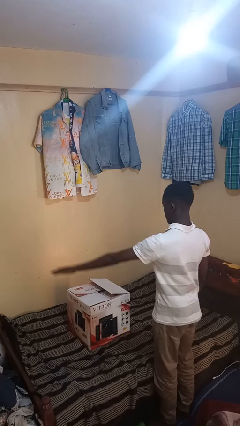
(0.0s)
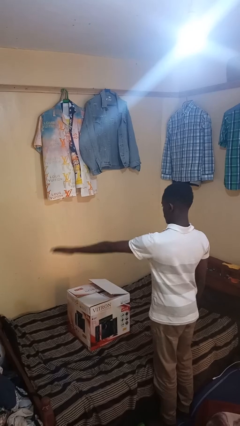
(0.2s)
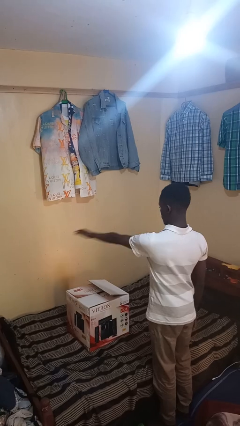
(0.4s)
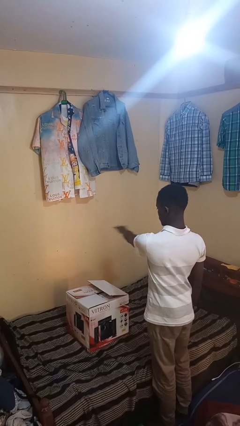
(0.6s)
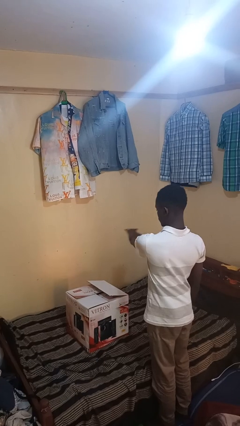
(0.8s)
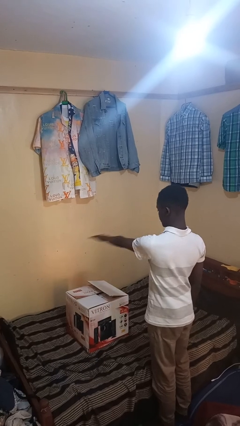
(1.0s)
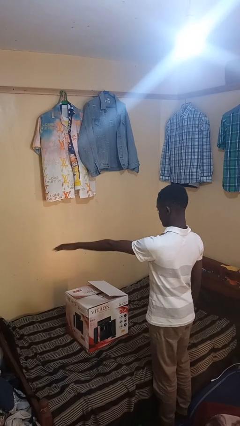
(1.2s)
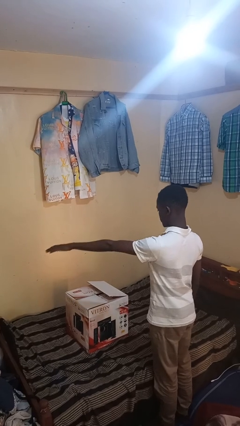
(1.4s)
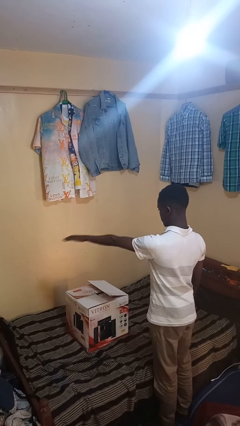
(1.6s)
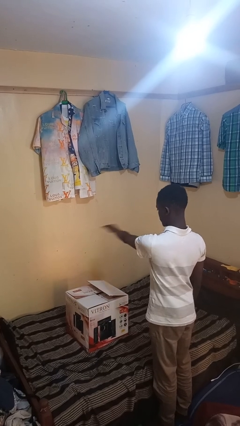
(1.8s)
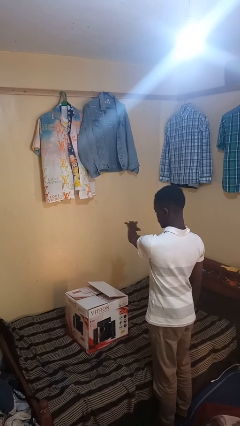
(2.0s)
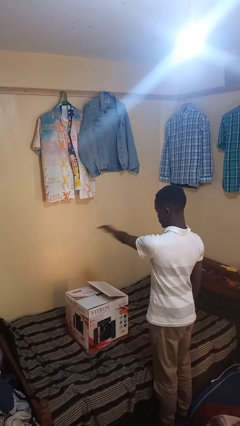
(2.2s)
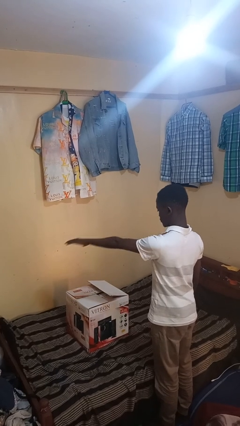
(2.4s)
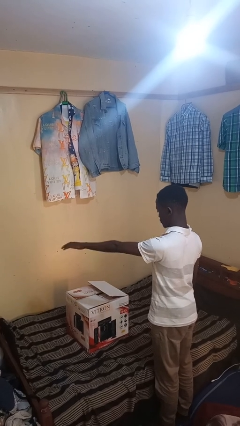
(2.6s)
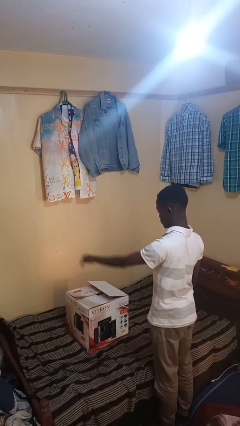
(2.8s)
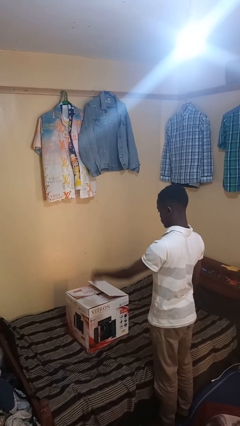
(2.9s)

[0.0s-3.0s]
person waves hand over object

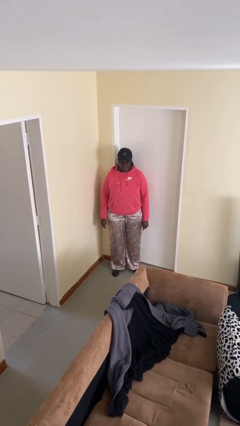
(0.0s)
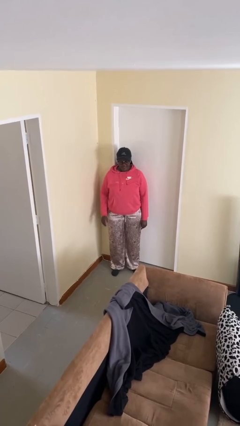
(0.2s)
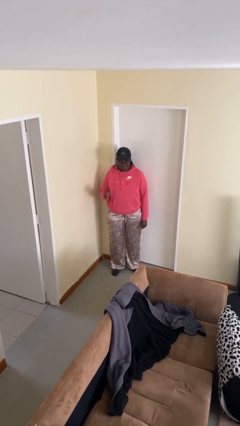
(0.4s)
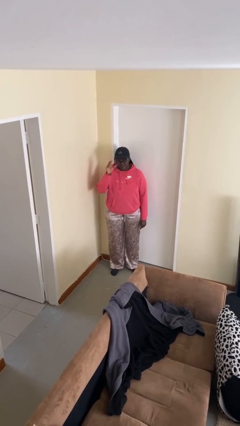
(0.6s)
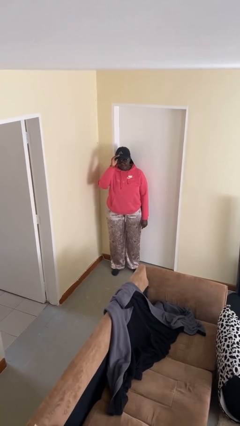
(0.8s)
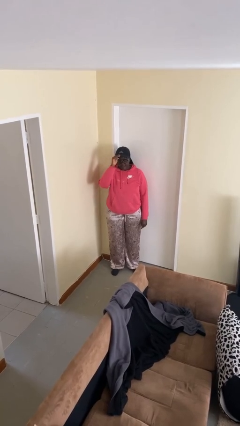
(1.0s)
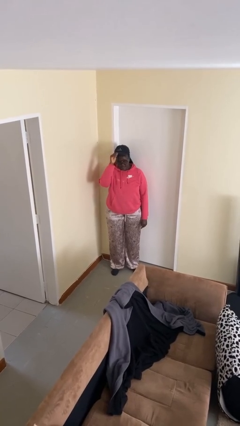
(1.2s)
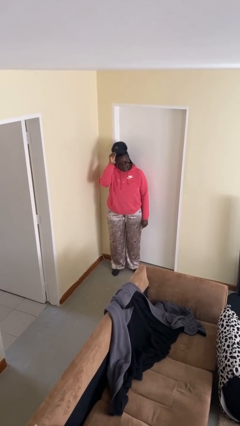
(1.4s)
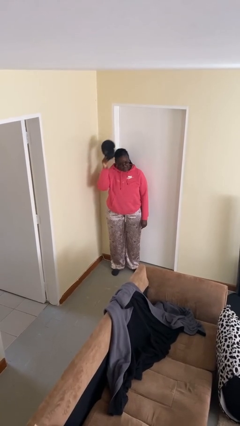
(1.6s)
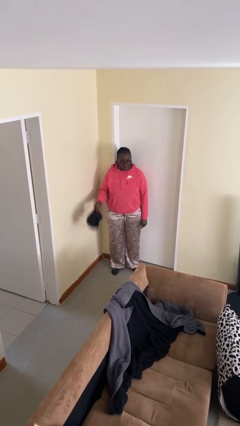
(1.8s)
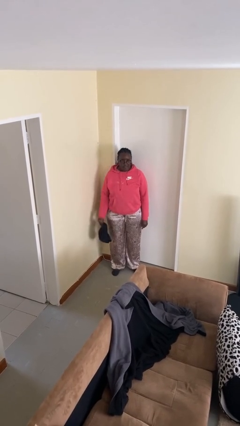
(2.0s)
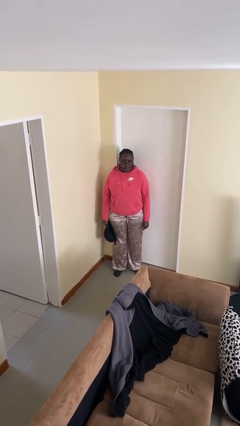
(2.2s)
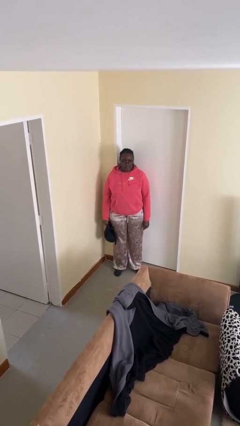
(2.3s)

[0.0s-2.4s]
person takes off hat

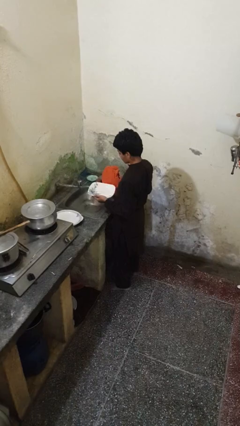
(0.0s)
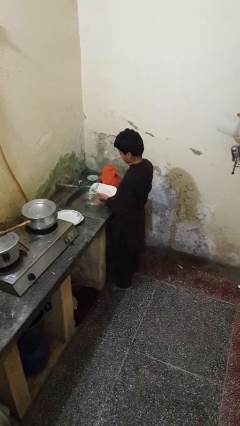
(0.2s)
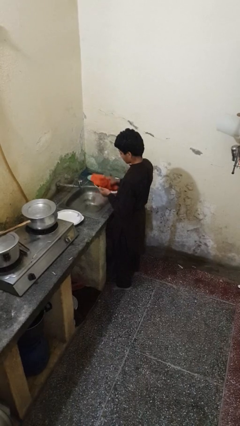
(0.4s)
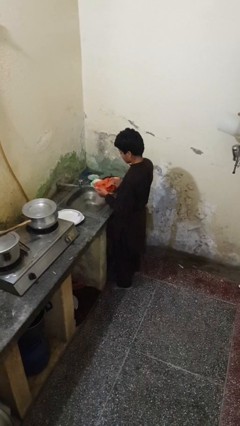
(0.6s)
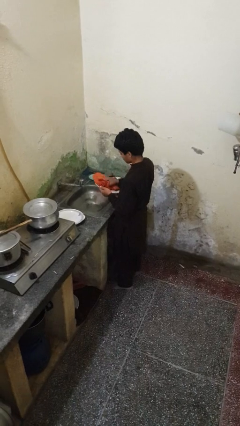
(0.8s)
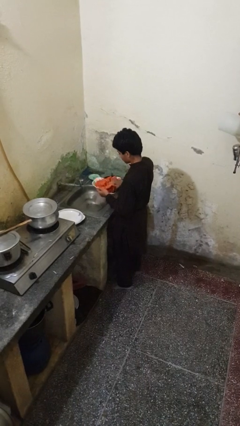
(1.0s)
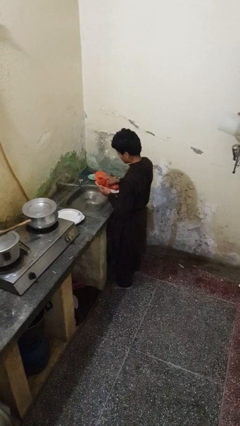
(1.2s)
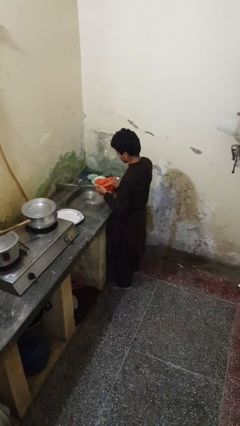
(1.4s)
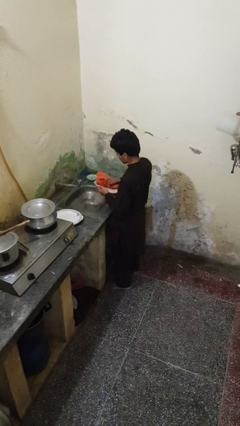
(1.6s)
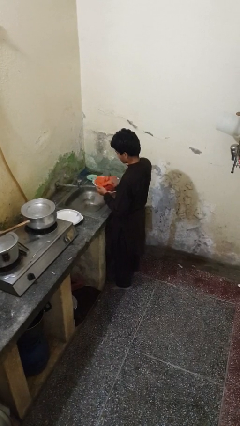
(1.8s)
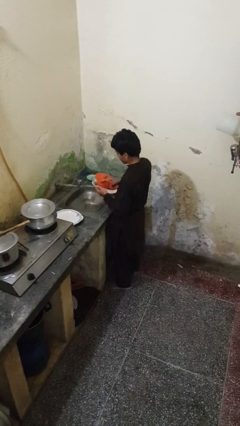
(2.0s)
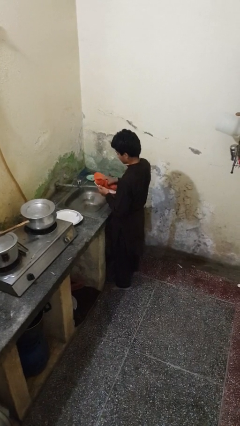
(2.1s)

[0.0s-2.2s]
person dries dish

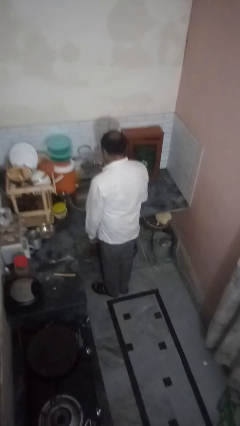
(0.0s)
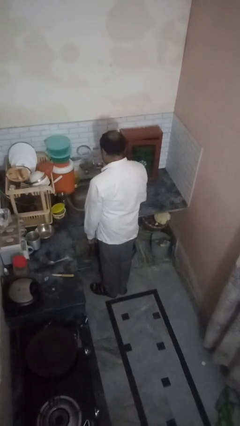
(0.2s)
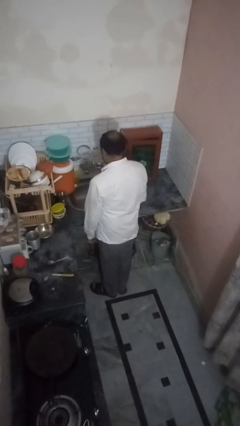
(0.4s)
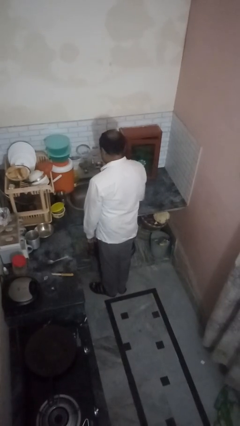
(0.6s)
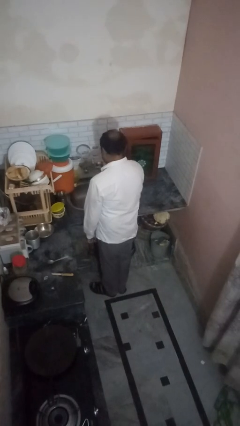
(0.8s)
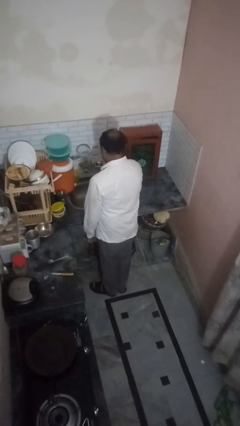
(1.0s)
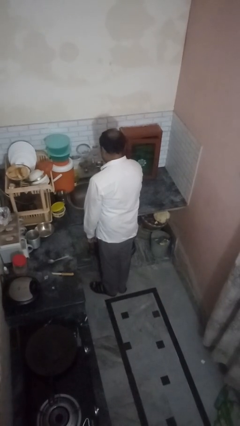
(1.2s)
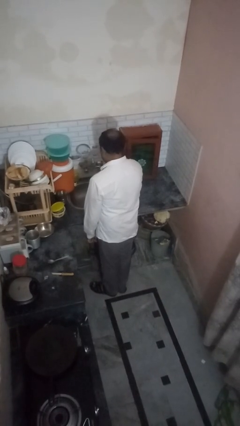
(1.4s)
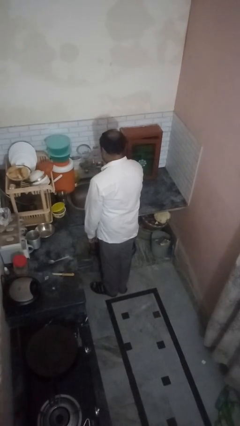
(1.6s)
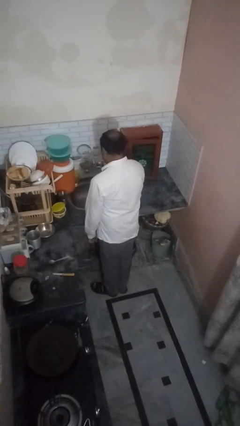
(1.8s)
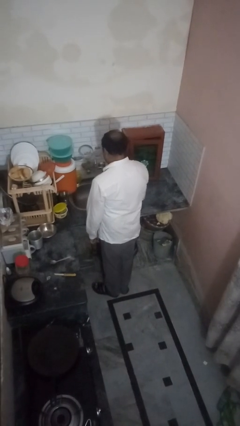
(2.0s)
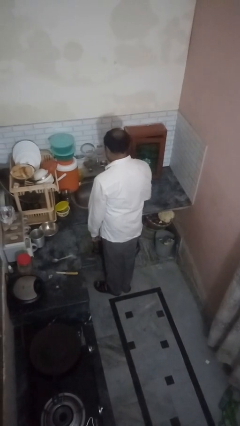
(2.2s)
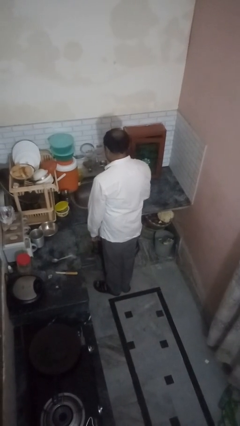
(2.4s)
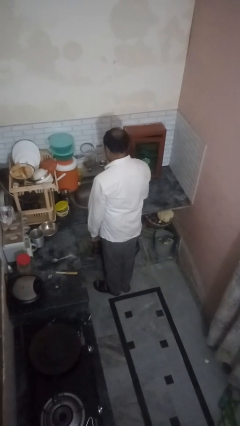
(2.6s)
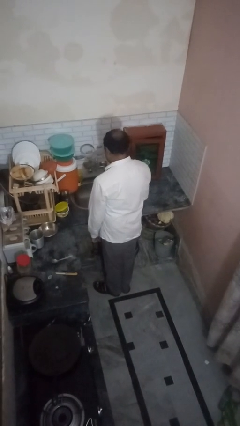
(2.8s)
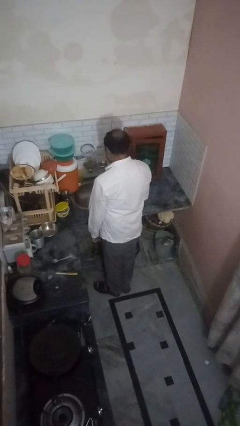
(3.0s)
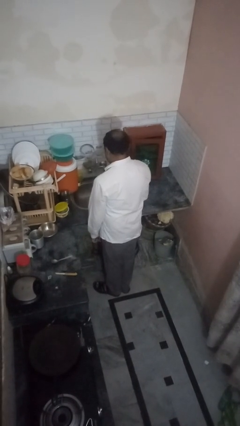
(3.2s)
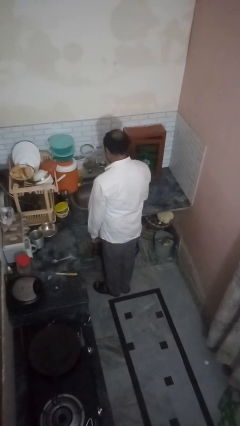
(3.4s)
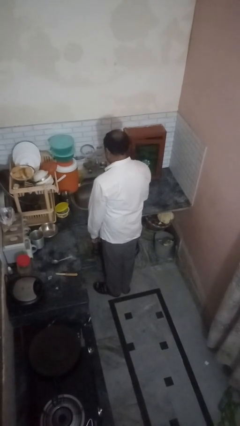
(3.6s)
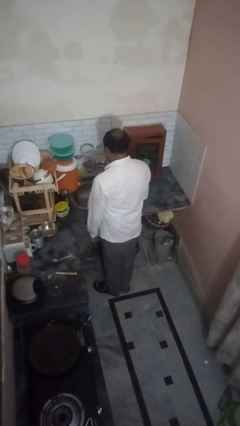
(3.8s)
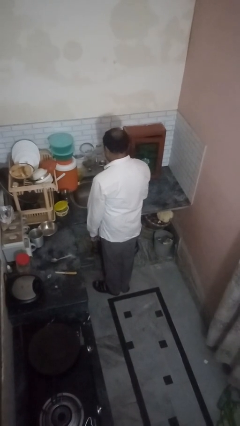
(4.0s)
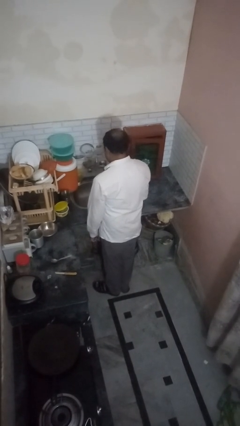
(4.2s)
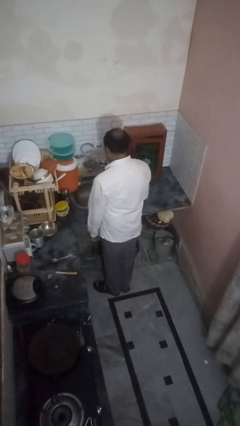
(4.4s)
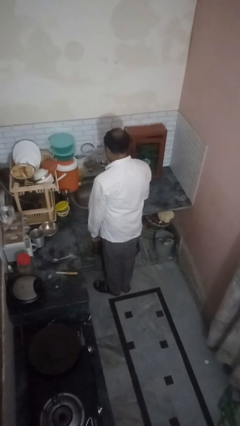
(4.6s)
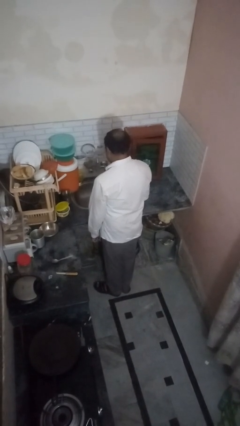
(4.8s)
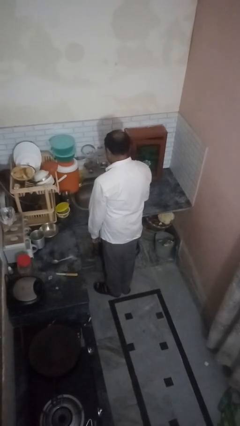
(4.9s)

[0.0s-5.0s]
person turns on faucet

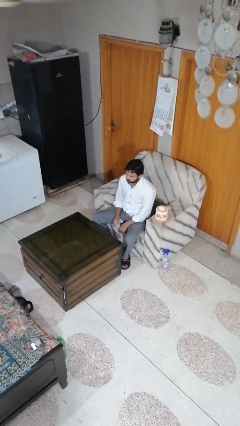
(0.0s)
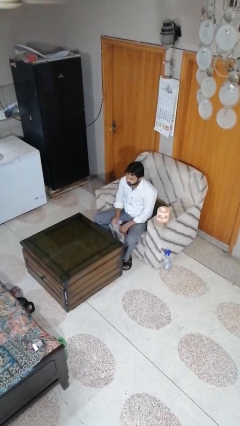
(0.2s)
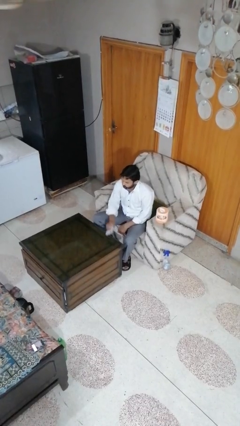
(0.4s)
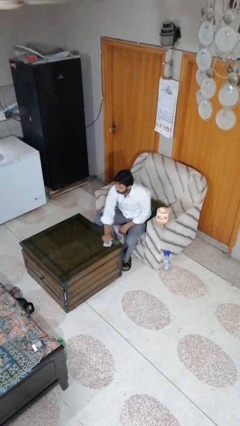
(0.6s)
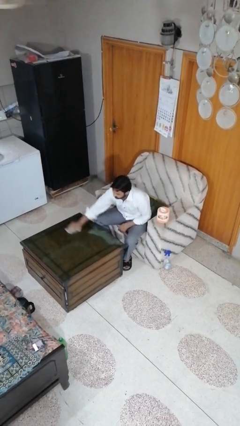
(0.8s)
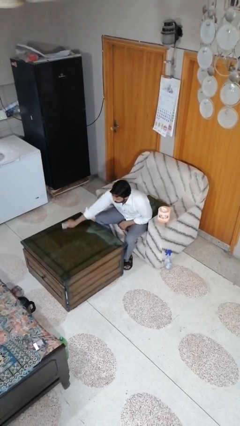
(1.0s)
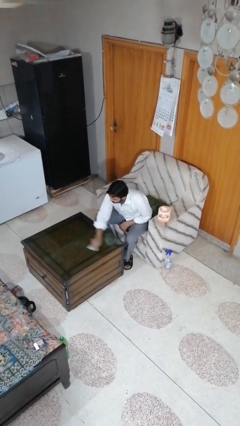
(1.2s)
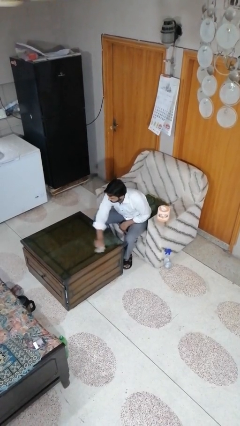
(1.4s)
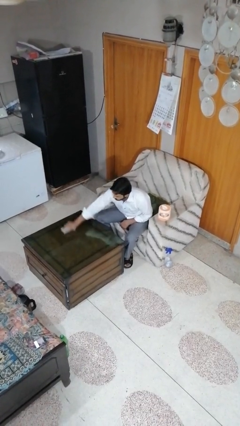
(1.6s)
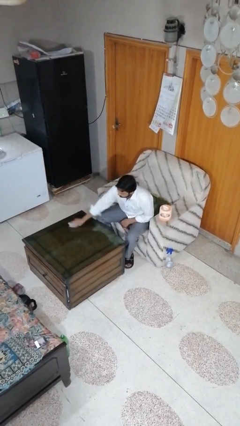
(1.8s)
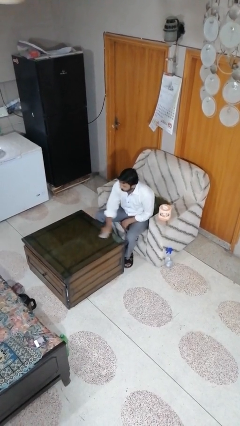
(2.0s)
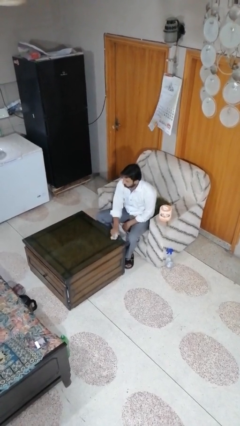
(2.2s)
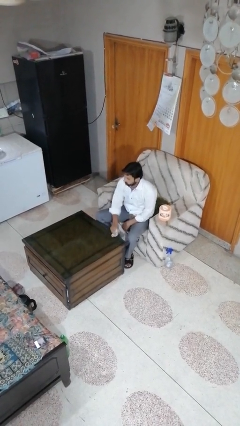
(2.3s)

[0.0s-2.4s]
person cleans table with rag

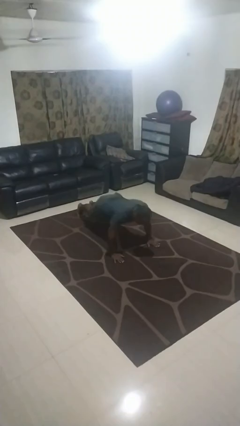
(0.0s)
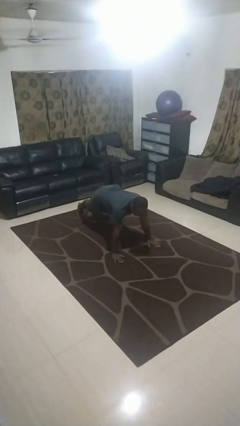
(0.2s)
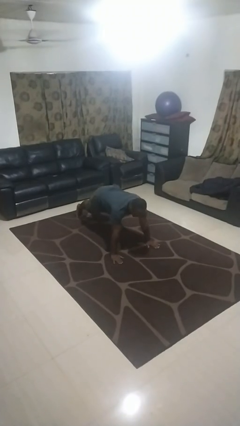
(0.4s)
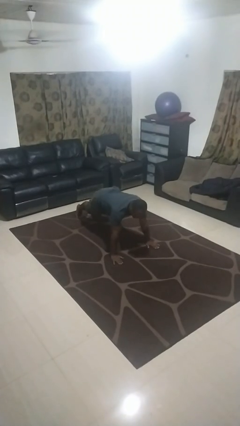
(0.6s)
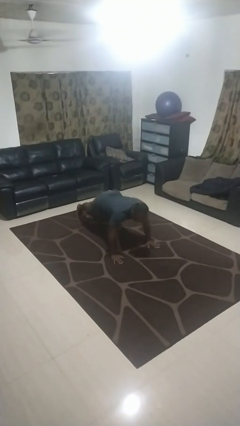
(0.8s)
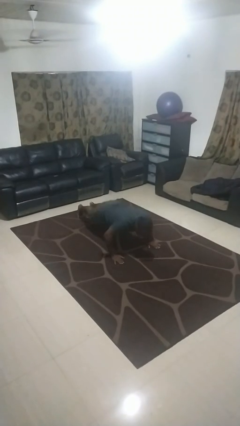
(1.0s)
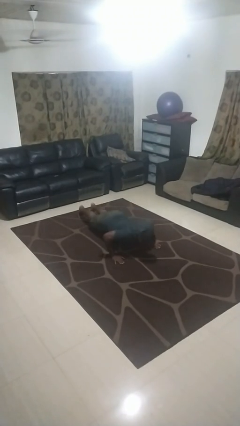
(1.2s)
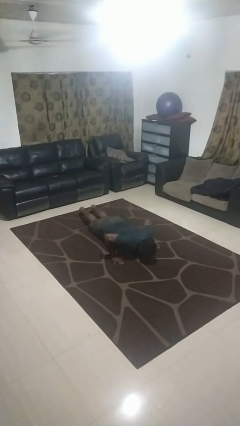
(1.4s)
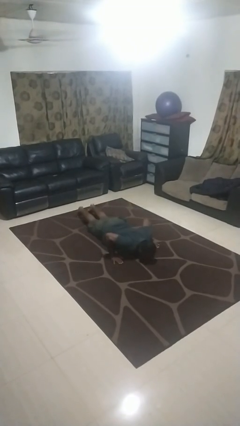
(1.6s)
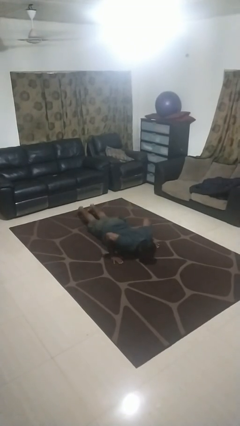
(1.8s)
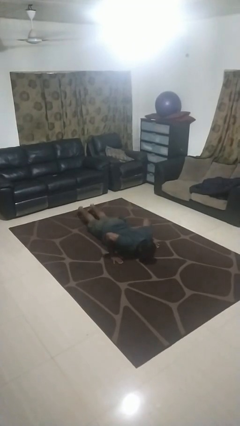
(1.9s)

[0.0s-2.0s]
person exercises with pushup

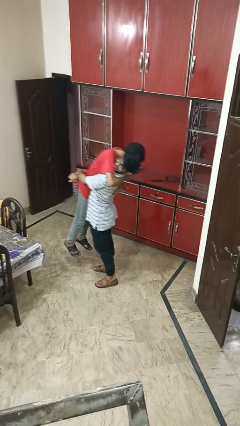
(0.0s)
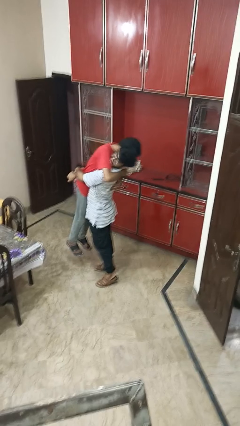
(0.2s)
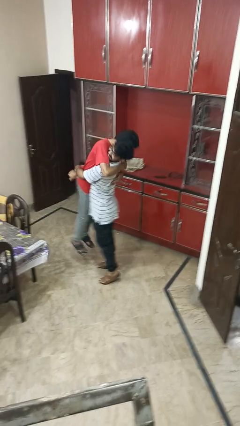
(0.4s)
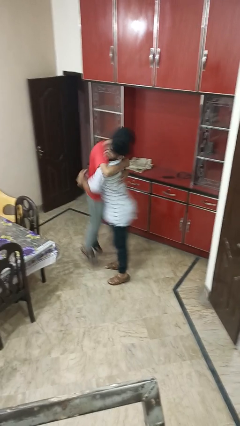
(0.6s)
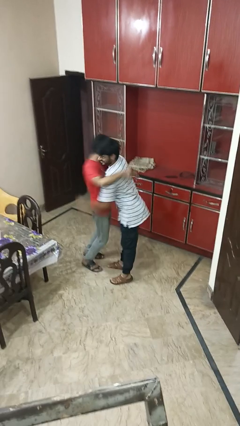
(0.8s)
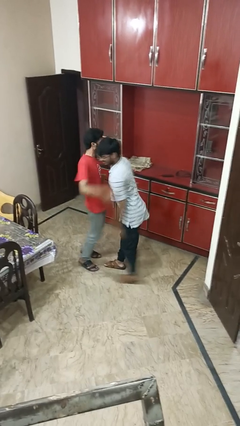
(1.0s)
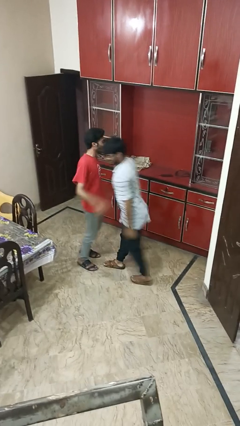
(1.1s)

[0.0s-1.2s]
person puts down person
